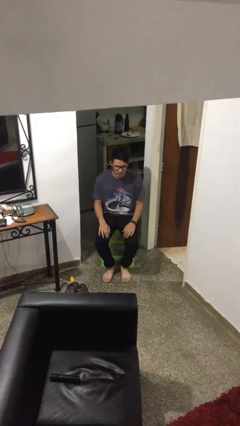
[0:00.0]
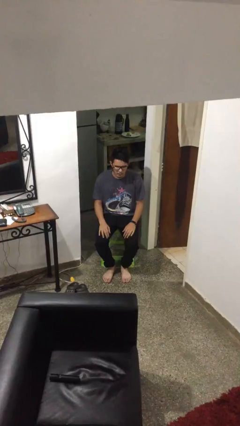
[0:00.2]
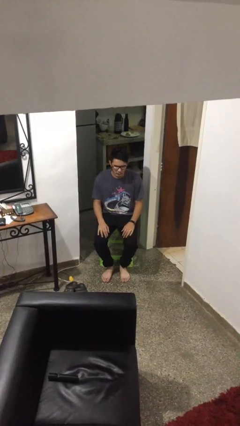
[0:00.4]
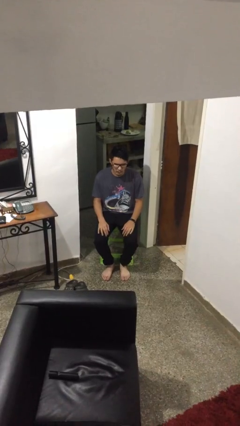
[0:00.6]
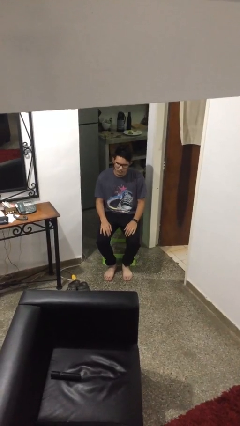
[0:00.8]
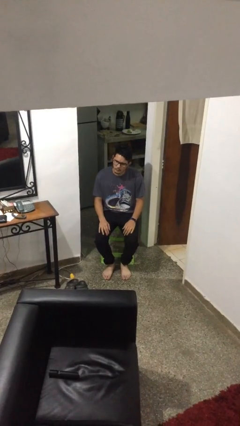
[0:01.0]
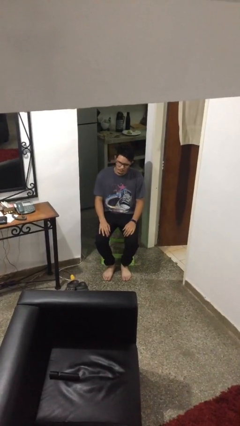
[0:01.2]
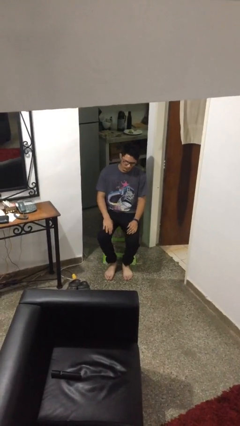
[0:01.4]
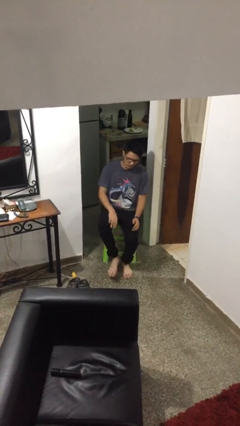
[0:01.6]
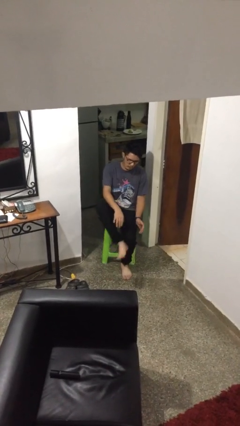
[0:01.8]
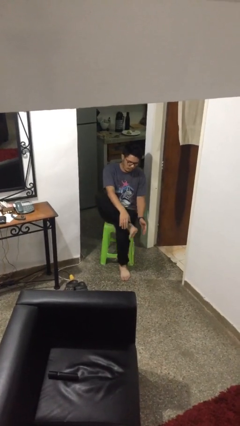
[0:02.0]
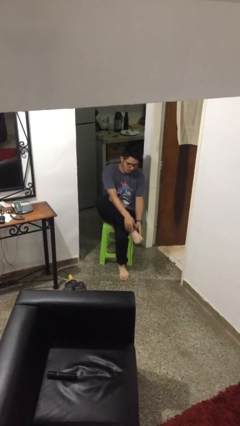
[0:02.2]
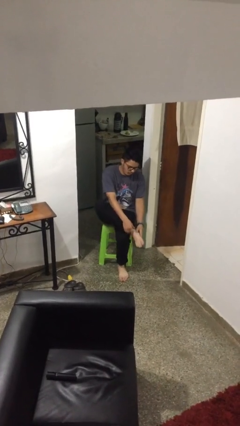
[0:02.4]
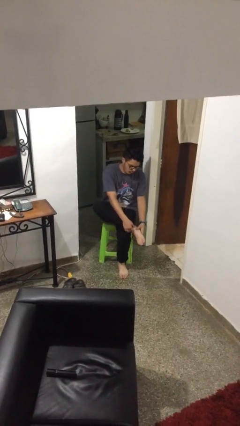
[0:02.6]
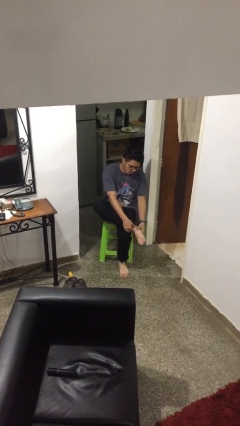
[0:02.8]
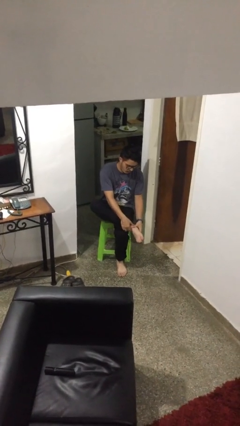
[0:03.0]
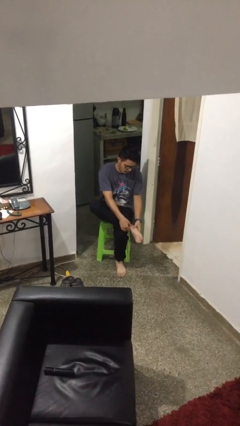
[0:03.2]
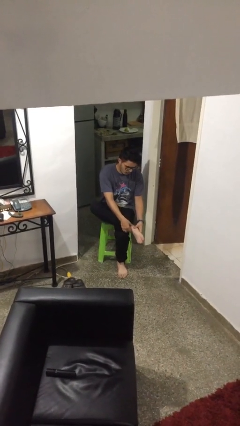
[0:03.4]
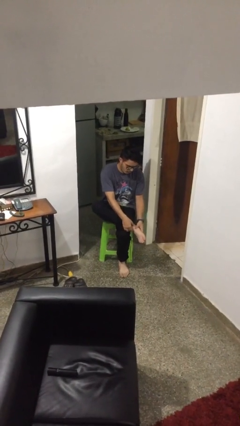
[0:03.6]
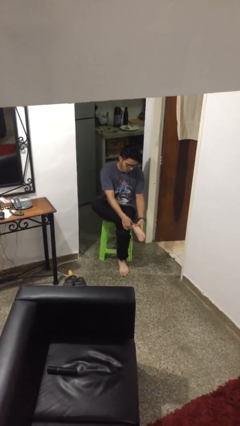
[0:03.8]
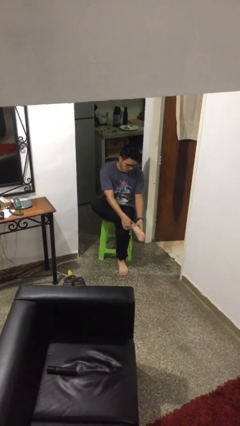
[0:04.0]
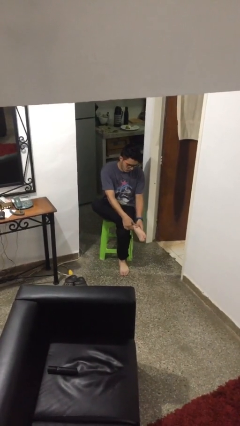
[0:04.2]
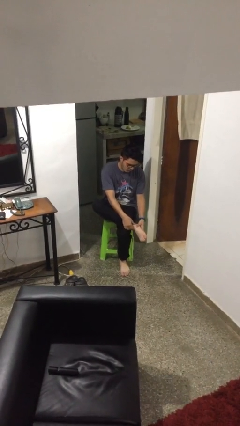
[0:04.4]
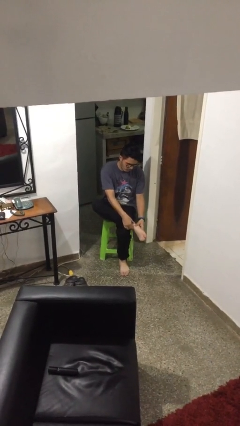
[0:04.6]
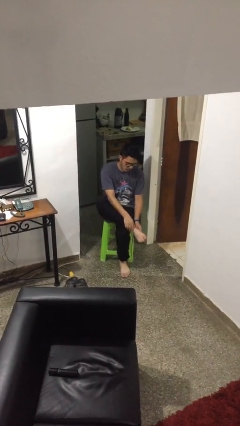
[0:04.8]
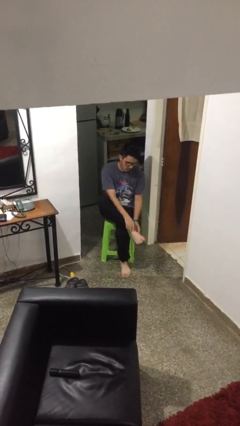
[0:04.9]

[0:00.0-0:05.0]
person rubs foot

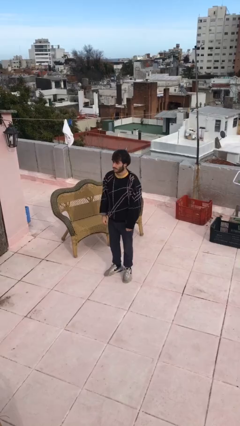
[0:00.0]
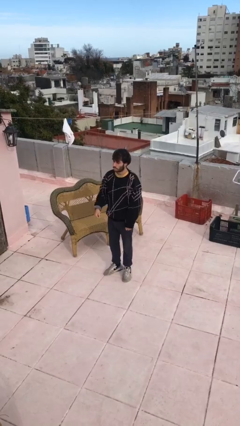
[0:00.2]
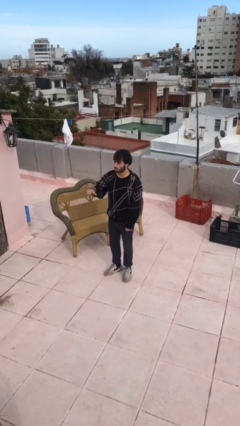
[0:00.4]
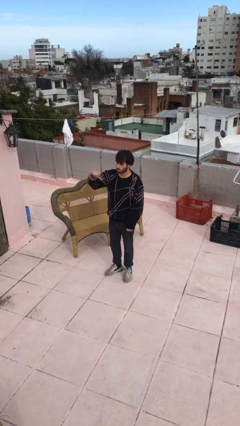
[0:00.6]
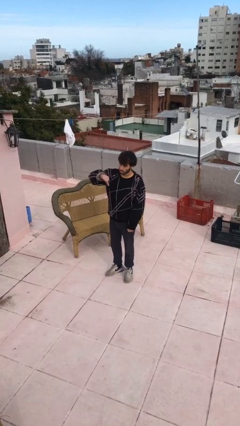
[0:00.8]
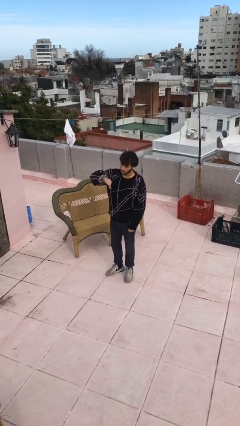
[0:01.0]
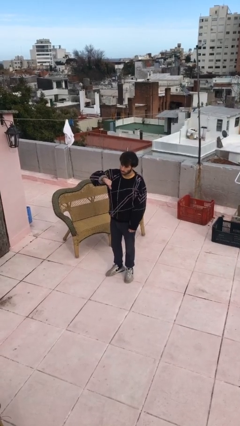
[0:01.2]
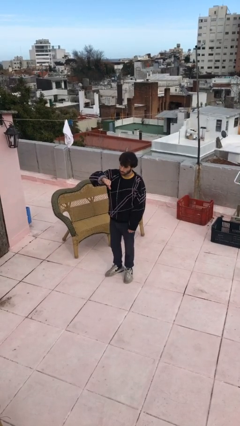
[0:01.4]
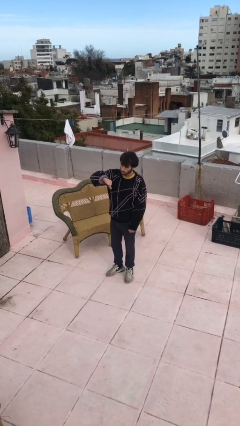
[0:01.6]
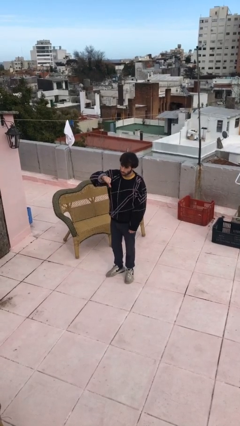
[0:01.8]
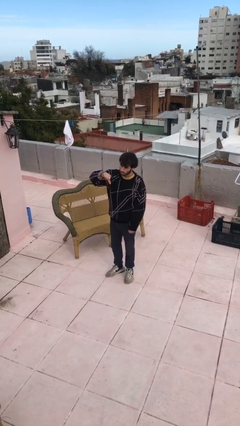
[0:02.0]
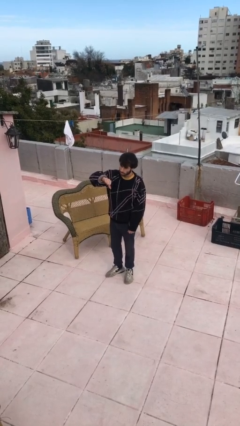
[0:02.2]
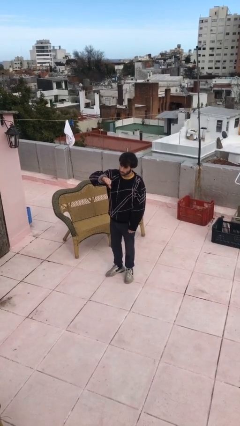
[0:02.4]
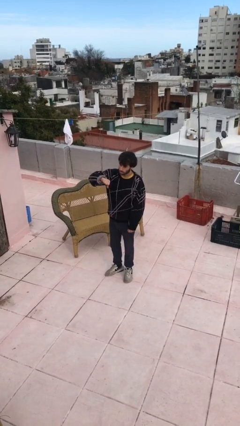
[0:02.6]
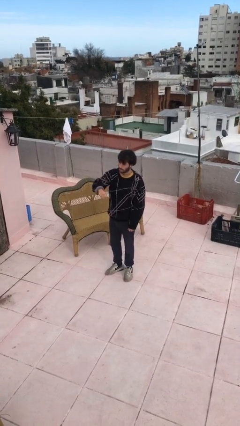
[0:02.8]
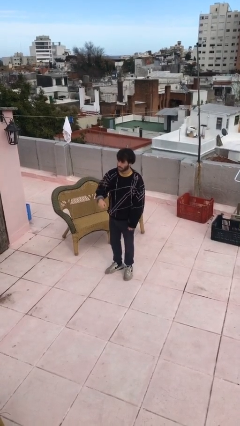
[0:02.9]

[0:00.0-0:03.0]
person gestures thumbs down

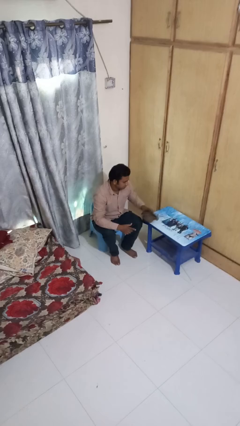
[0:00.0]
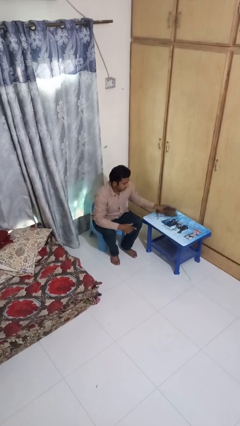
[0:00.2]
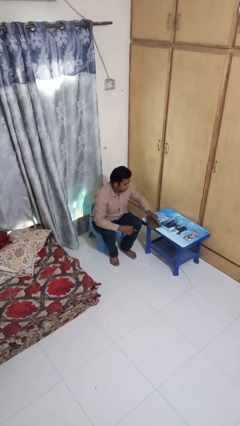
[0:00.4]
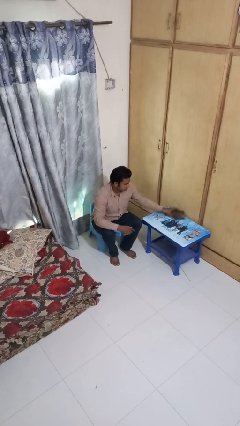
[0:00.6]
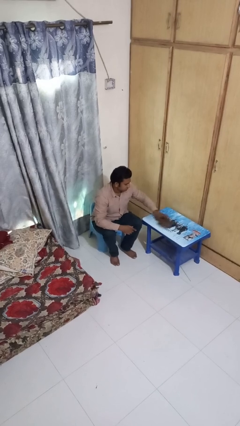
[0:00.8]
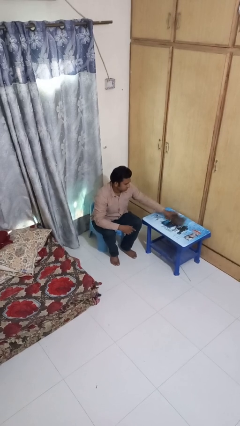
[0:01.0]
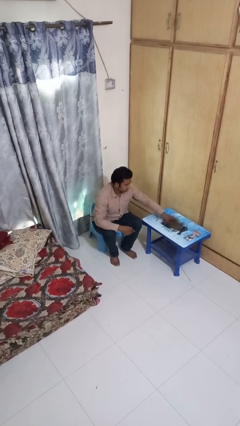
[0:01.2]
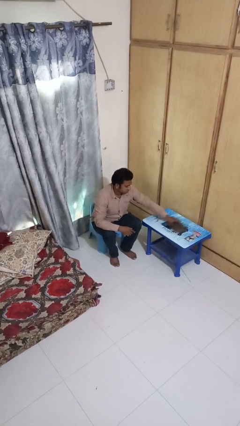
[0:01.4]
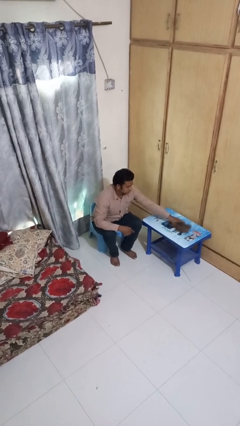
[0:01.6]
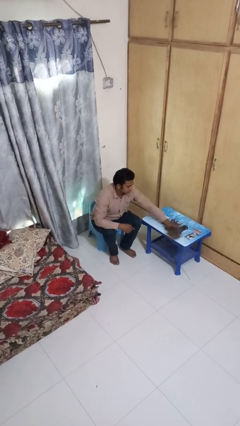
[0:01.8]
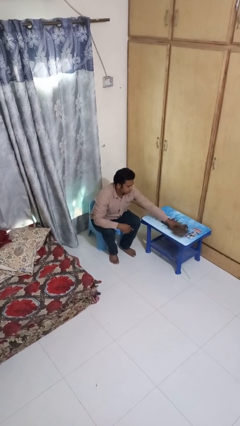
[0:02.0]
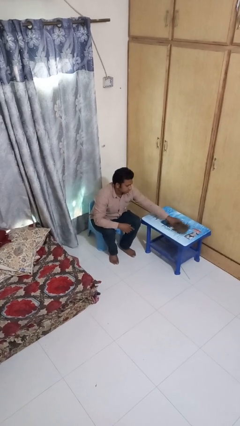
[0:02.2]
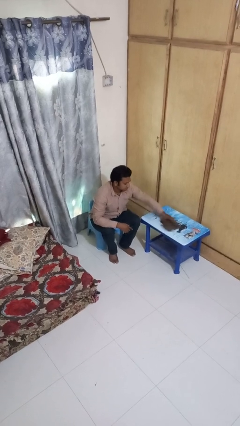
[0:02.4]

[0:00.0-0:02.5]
person cleans table with rag

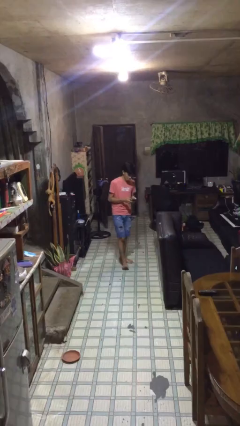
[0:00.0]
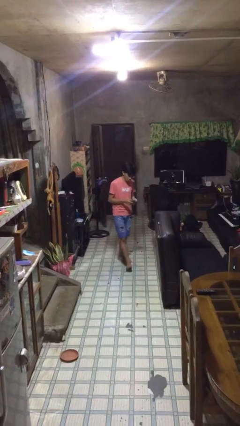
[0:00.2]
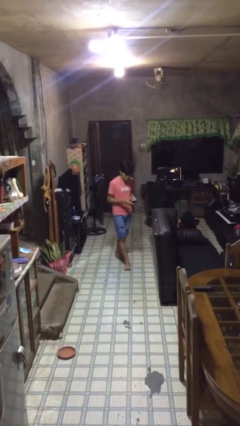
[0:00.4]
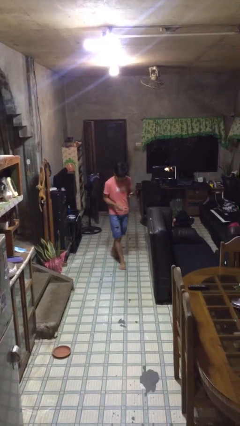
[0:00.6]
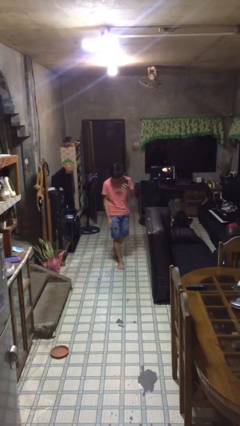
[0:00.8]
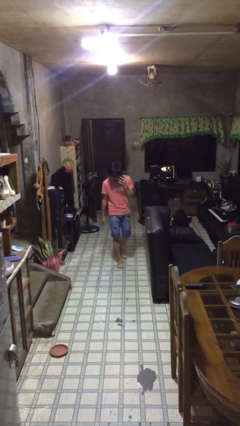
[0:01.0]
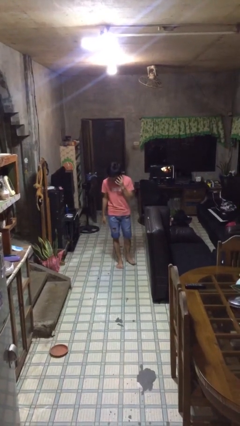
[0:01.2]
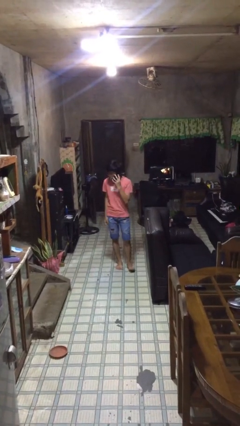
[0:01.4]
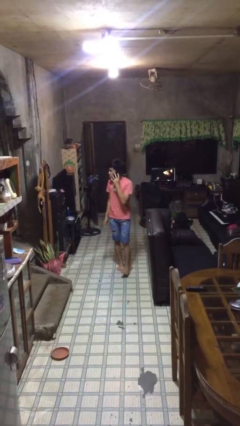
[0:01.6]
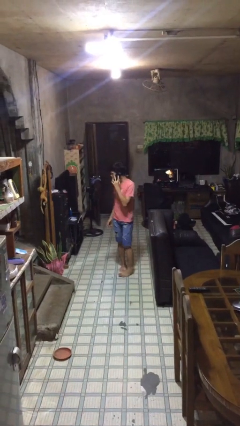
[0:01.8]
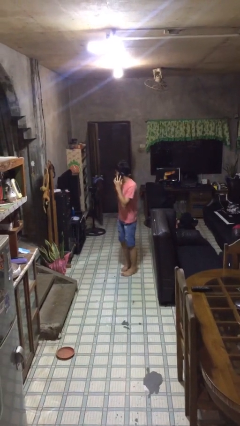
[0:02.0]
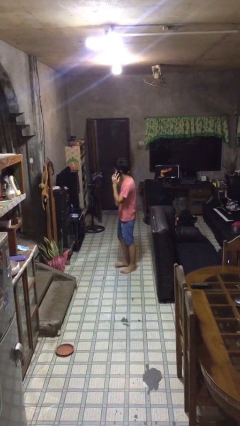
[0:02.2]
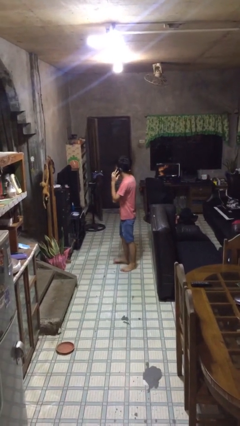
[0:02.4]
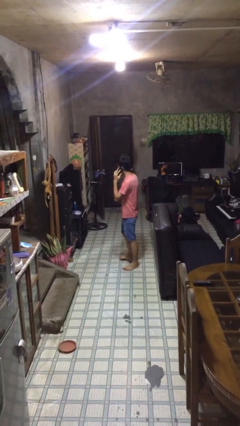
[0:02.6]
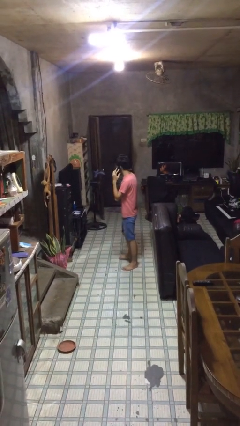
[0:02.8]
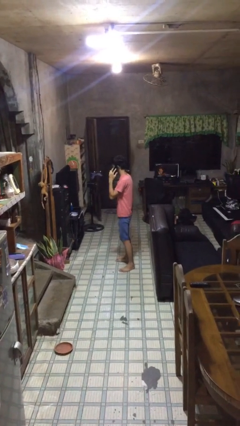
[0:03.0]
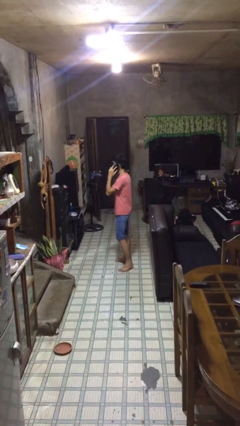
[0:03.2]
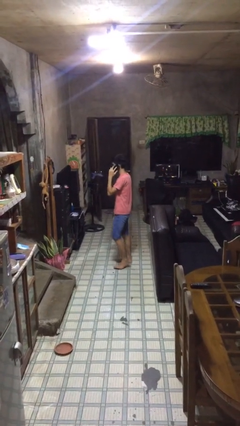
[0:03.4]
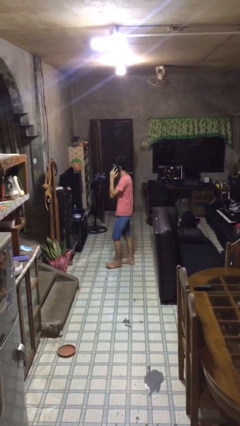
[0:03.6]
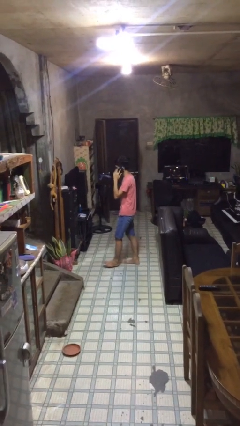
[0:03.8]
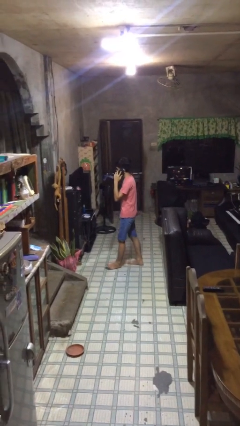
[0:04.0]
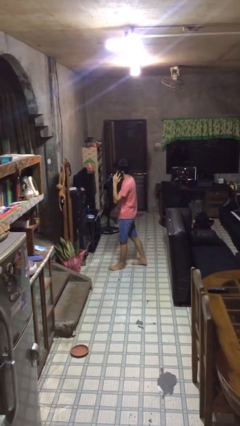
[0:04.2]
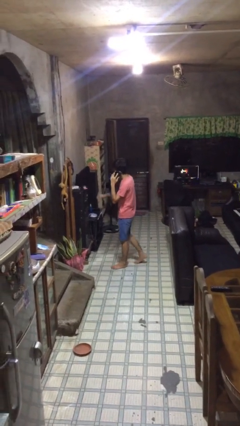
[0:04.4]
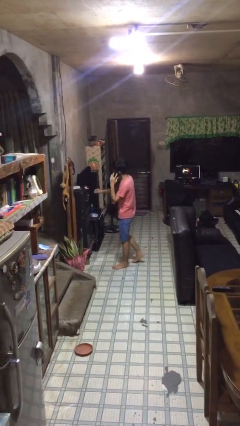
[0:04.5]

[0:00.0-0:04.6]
person talks on phone

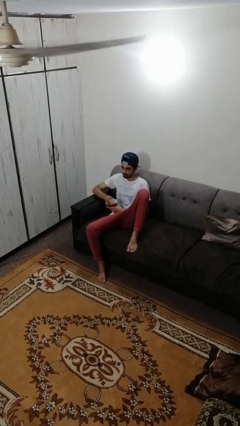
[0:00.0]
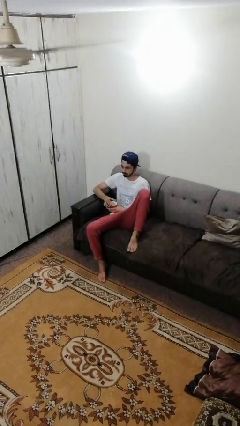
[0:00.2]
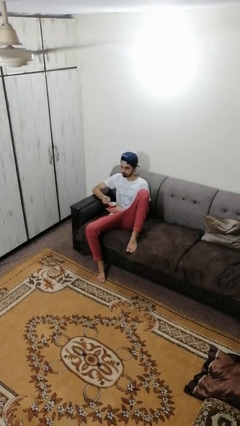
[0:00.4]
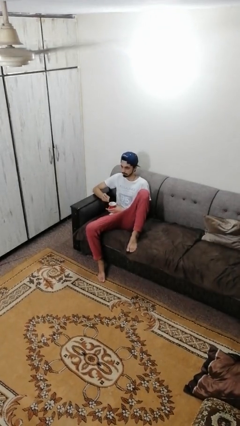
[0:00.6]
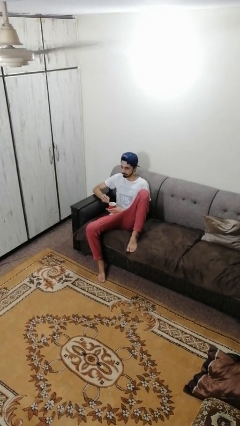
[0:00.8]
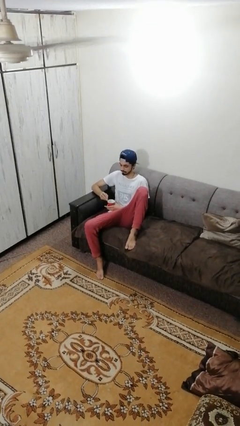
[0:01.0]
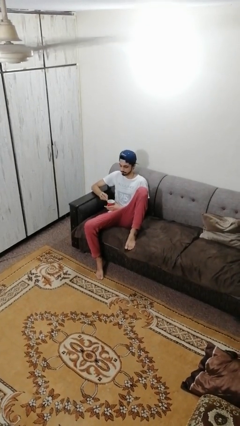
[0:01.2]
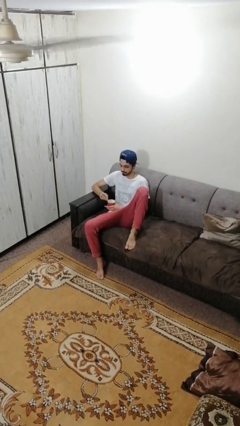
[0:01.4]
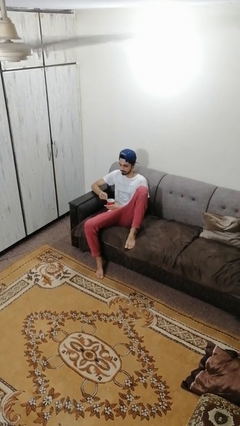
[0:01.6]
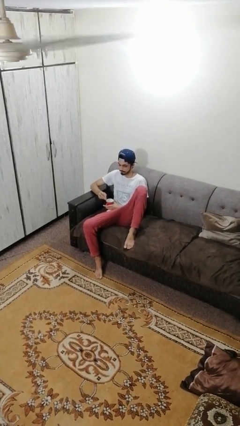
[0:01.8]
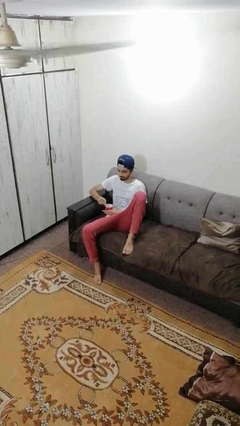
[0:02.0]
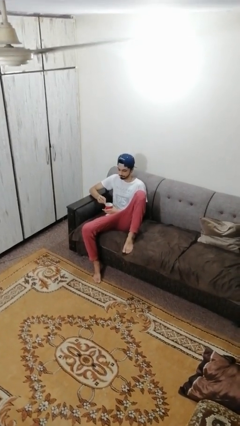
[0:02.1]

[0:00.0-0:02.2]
person stirs mug

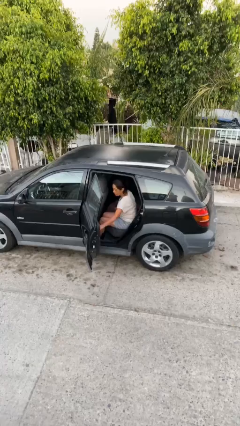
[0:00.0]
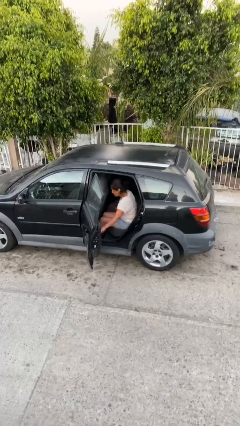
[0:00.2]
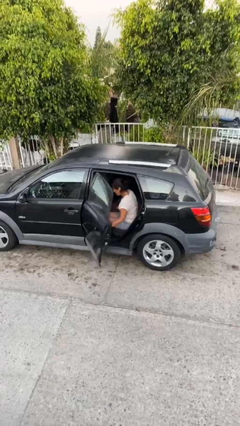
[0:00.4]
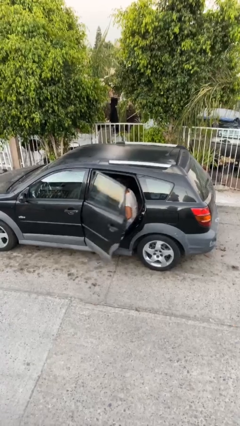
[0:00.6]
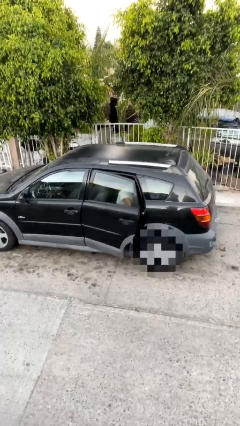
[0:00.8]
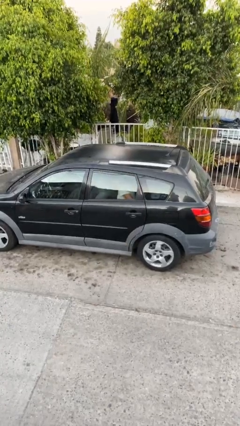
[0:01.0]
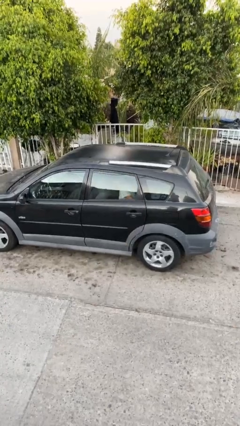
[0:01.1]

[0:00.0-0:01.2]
person closes car door
